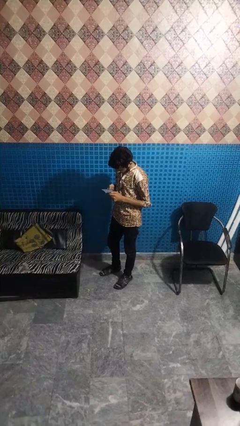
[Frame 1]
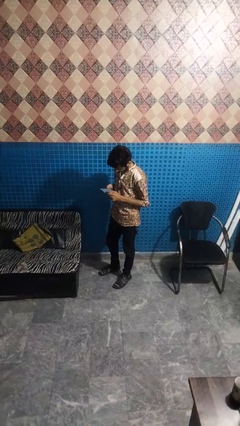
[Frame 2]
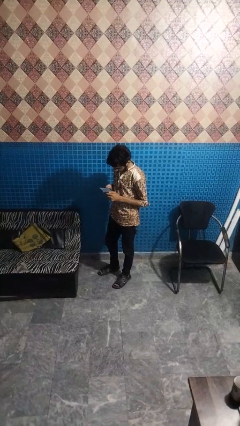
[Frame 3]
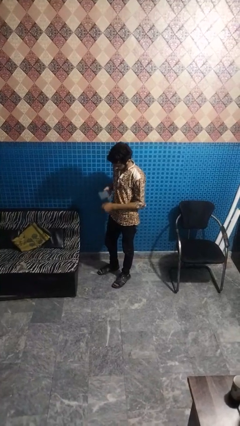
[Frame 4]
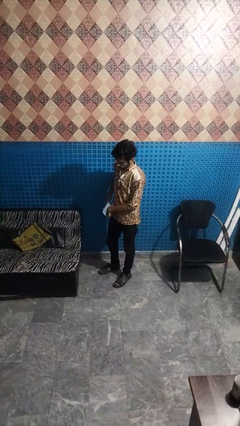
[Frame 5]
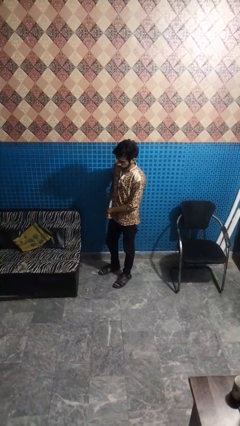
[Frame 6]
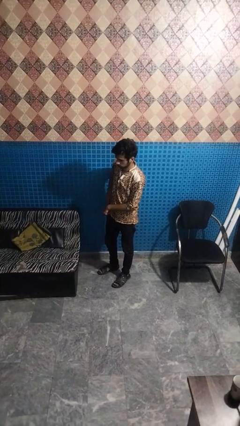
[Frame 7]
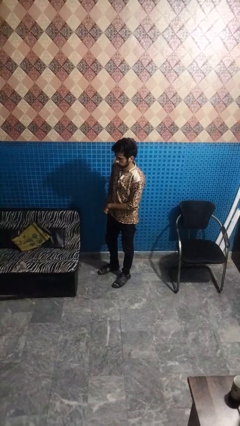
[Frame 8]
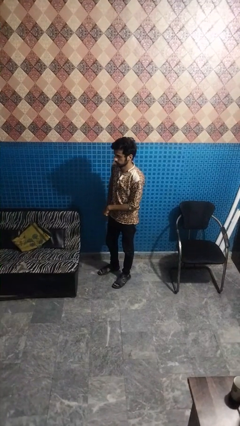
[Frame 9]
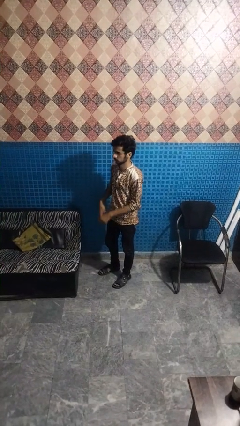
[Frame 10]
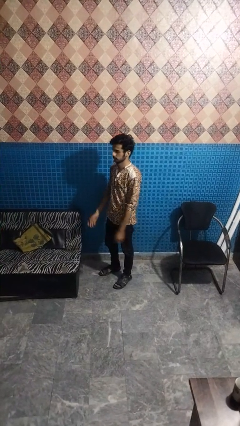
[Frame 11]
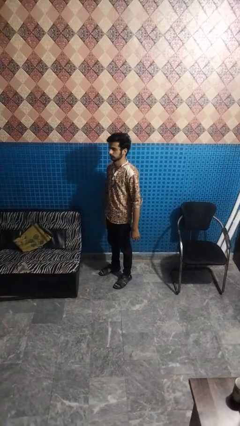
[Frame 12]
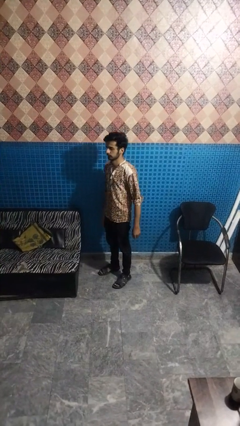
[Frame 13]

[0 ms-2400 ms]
person puts phone into pocket

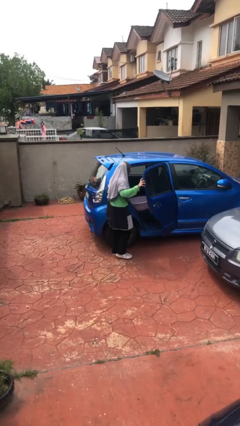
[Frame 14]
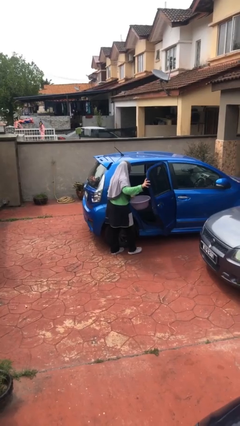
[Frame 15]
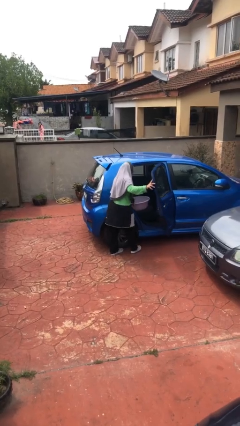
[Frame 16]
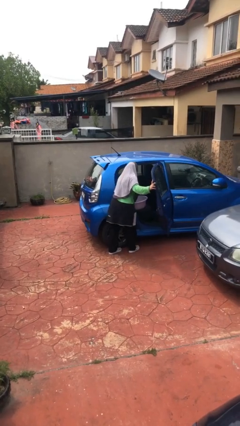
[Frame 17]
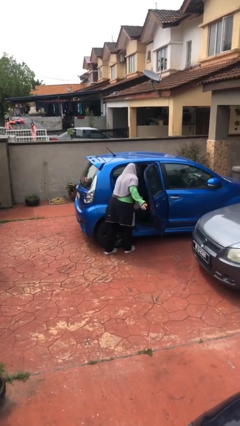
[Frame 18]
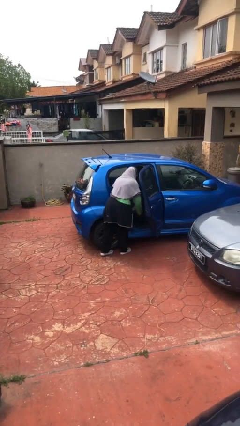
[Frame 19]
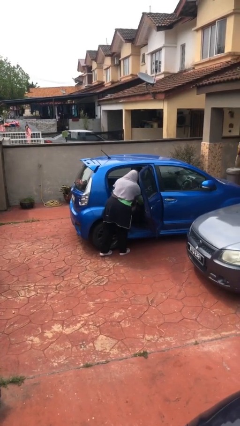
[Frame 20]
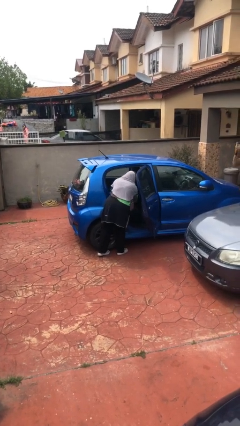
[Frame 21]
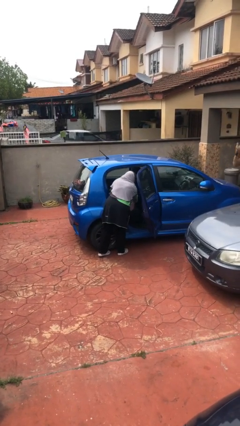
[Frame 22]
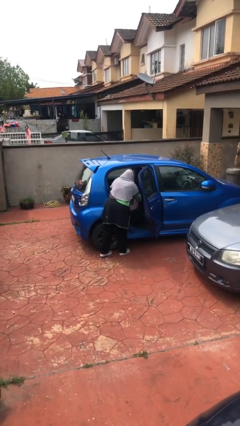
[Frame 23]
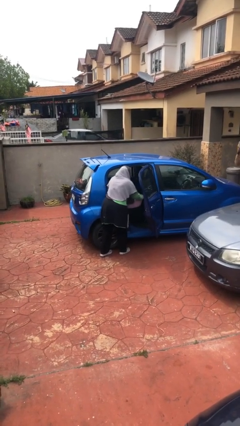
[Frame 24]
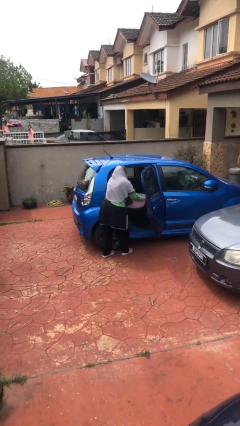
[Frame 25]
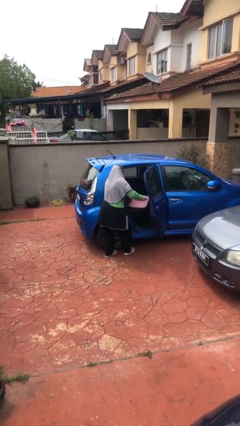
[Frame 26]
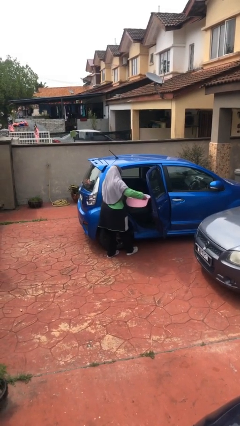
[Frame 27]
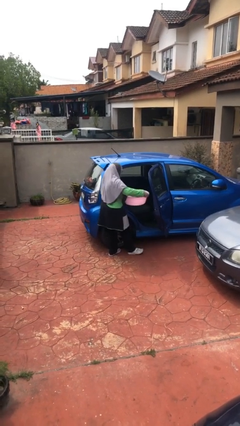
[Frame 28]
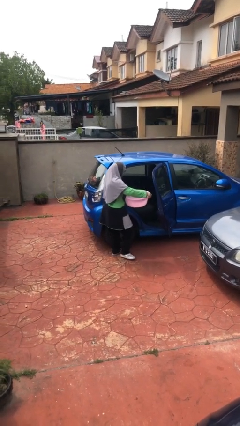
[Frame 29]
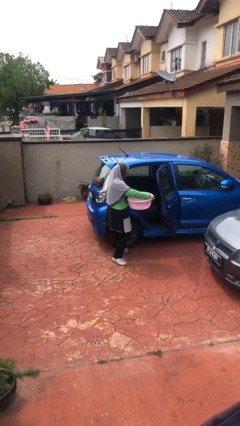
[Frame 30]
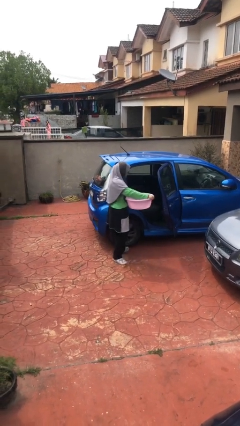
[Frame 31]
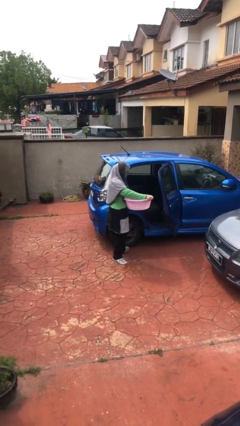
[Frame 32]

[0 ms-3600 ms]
person unloads car

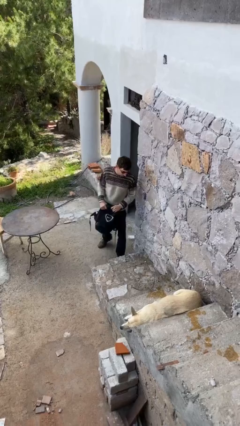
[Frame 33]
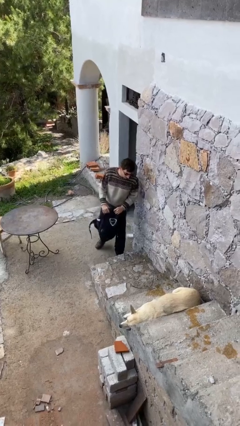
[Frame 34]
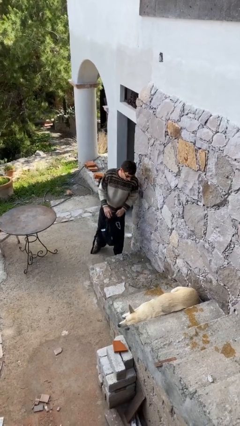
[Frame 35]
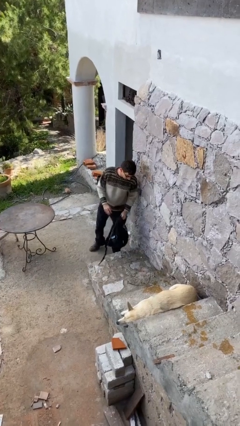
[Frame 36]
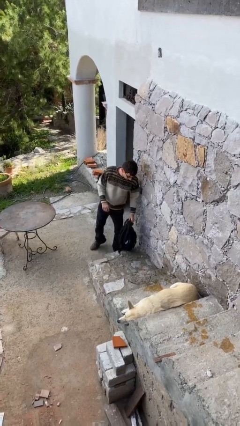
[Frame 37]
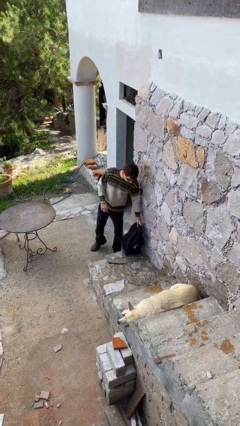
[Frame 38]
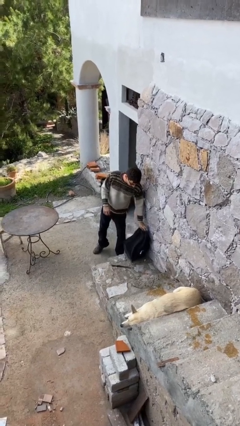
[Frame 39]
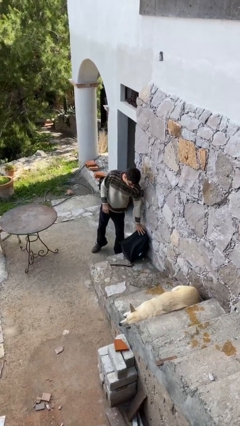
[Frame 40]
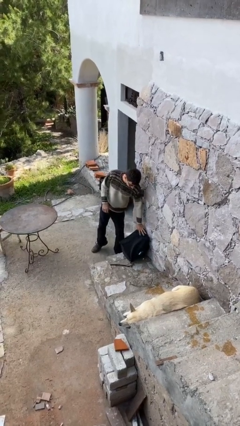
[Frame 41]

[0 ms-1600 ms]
person puts down object on floor

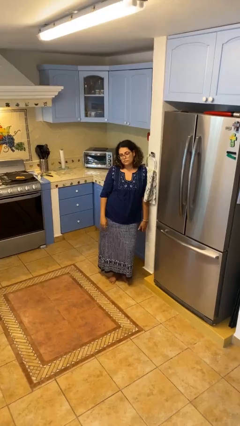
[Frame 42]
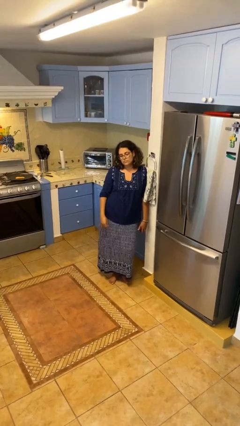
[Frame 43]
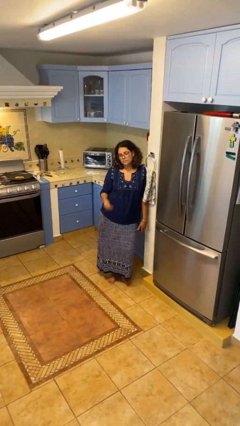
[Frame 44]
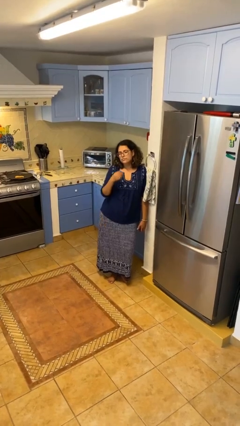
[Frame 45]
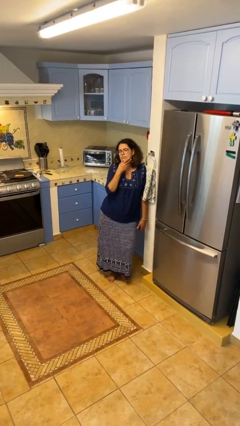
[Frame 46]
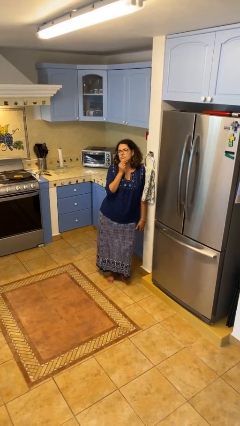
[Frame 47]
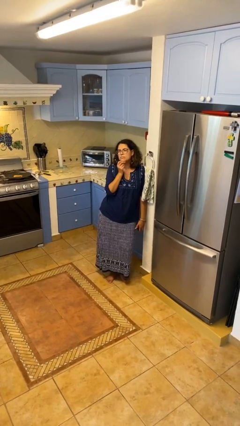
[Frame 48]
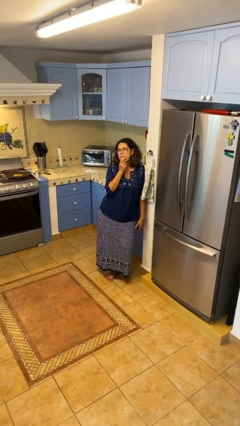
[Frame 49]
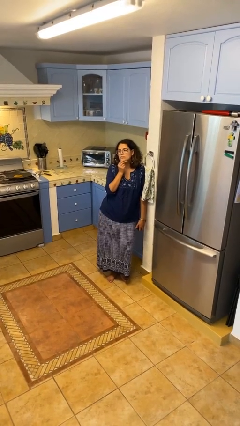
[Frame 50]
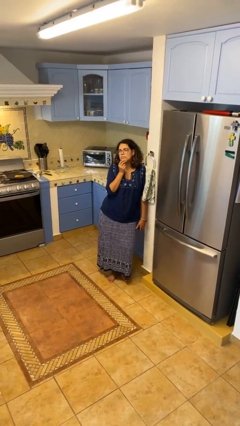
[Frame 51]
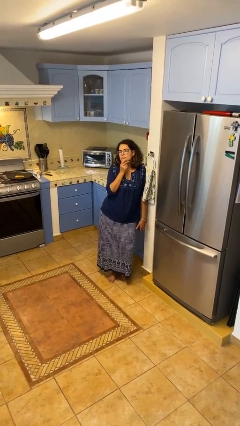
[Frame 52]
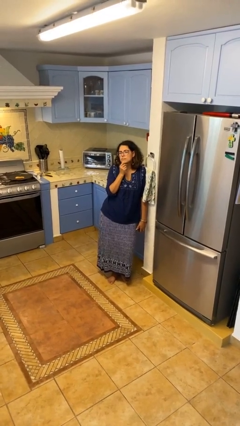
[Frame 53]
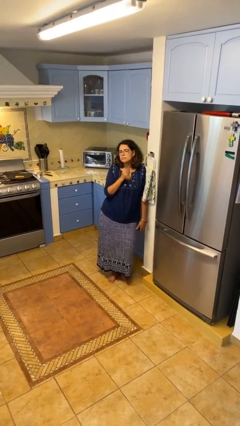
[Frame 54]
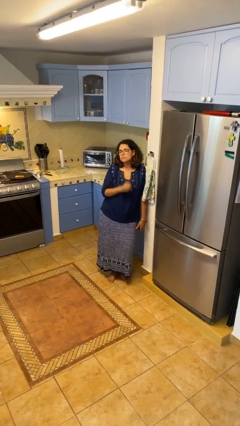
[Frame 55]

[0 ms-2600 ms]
person strokes chin

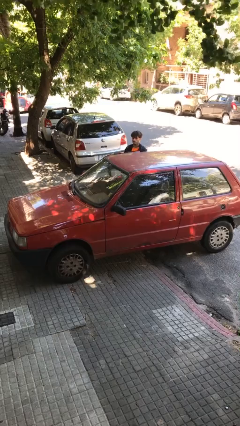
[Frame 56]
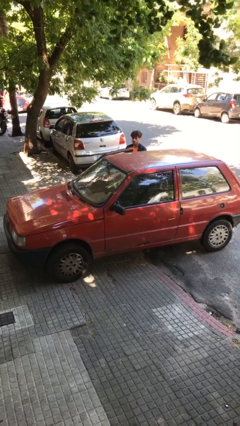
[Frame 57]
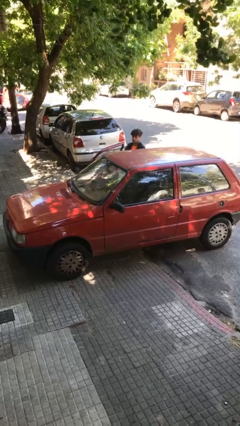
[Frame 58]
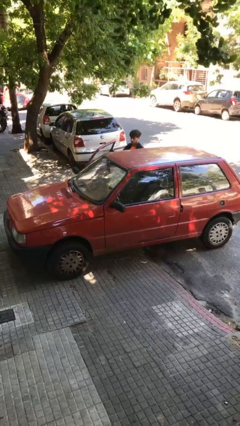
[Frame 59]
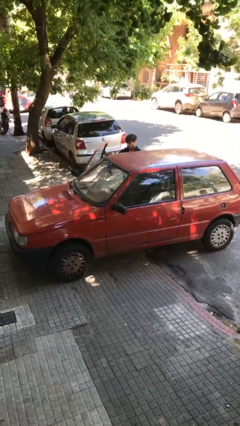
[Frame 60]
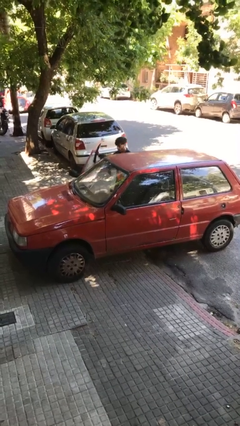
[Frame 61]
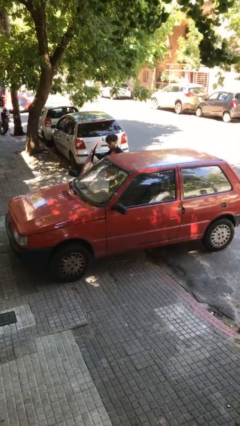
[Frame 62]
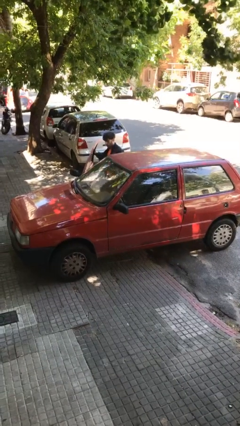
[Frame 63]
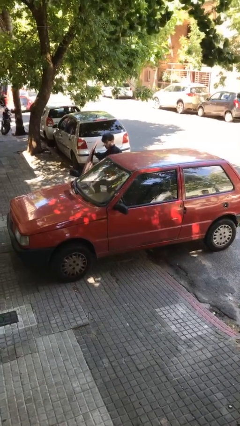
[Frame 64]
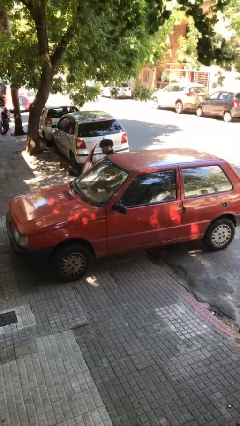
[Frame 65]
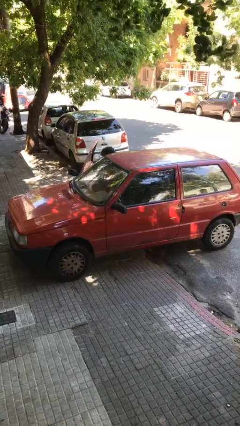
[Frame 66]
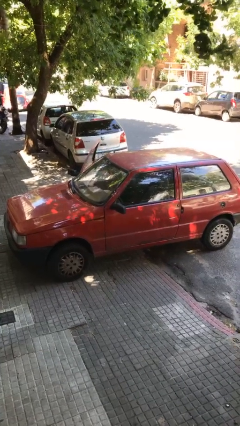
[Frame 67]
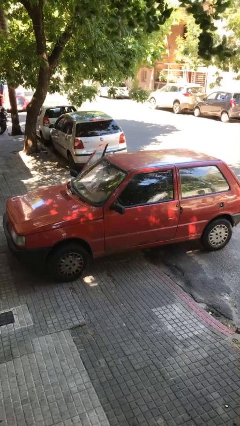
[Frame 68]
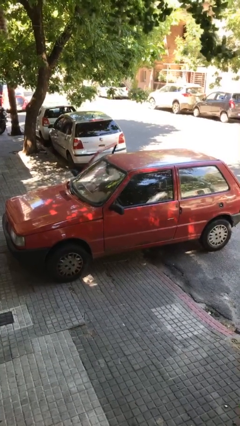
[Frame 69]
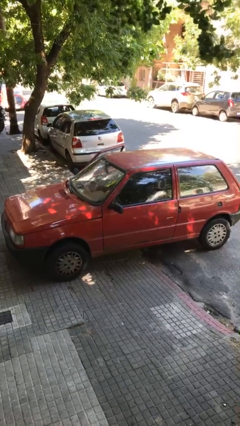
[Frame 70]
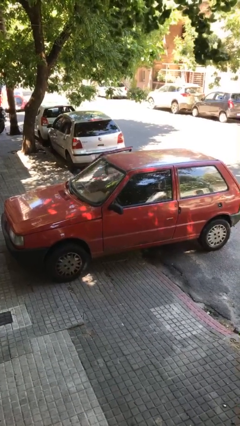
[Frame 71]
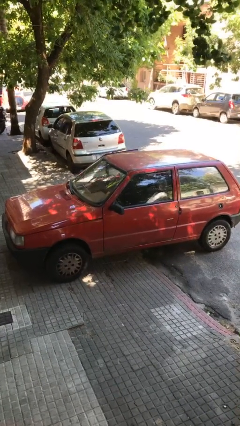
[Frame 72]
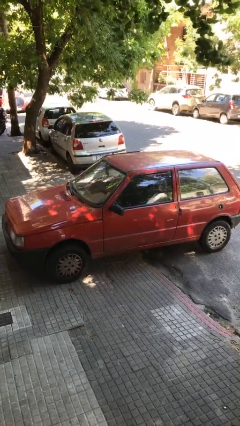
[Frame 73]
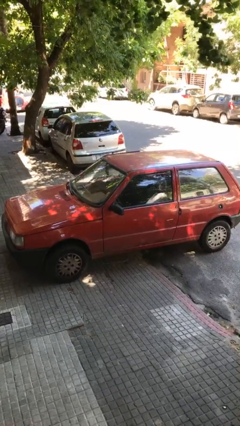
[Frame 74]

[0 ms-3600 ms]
car picks up person

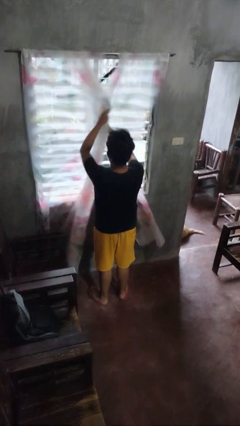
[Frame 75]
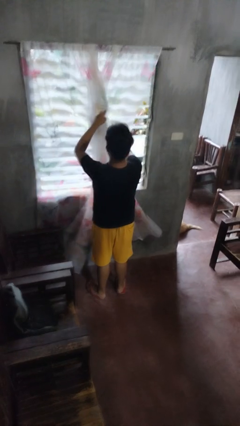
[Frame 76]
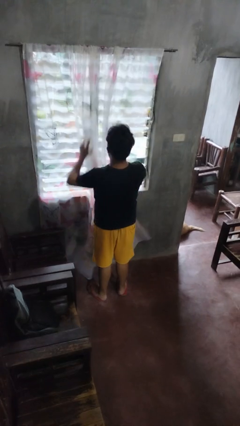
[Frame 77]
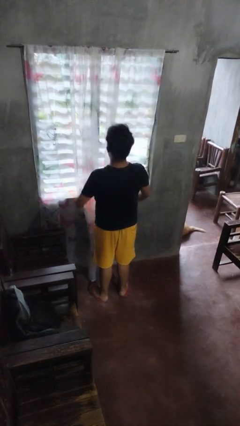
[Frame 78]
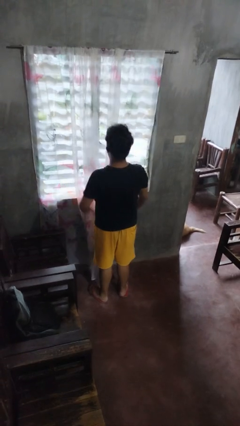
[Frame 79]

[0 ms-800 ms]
person closes curtains

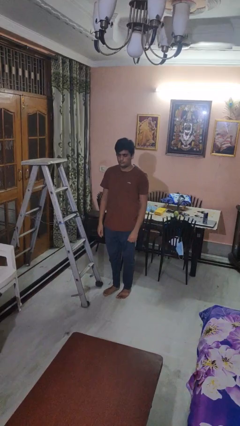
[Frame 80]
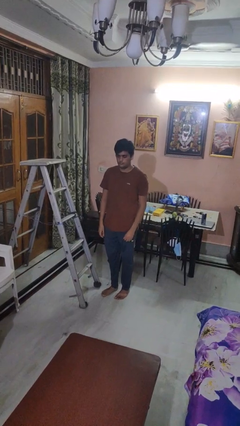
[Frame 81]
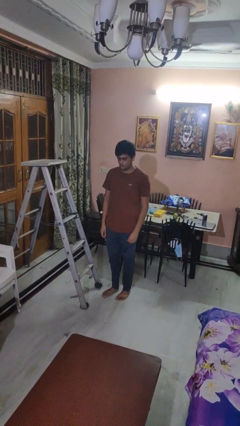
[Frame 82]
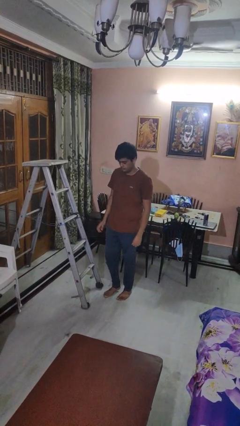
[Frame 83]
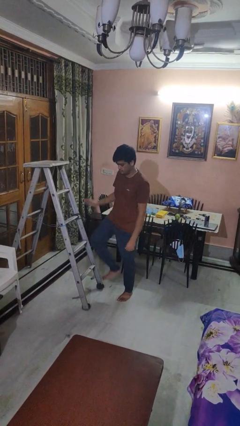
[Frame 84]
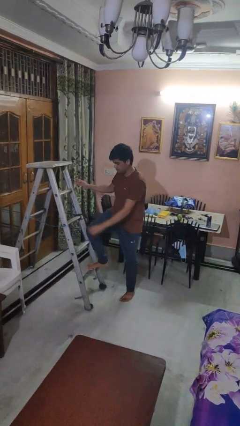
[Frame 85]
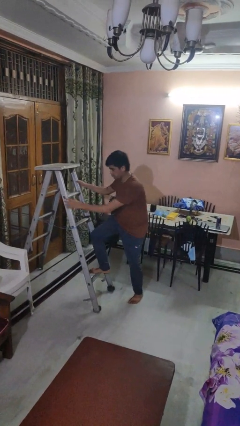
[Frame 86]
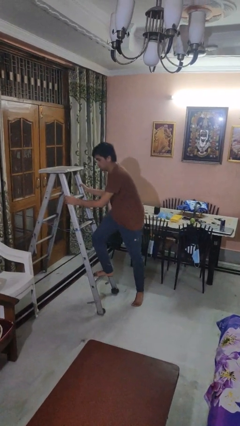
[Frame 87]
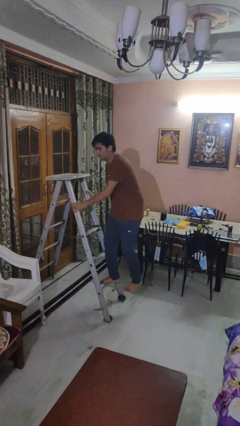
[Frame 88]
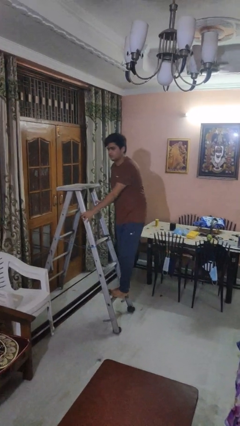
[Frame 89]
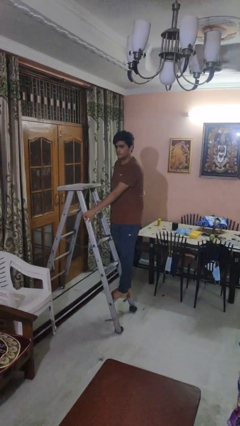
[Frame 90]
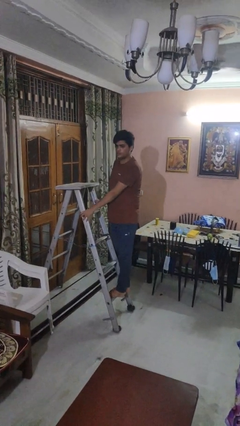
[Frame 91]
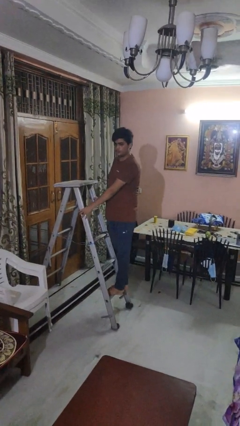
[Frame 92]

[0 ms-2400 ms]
person climbs up ladder

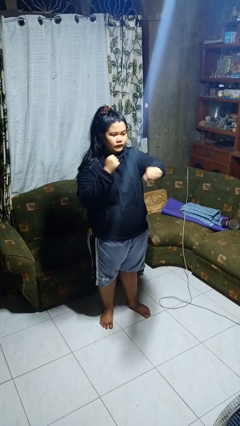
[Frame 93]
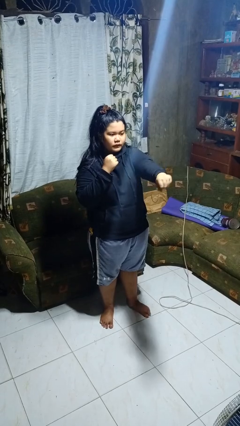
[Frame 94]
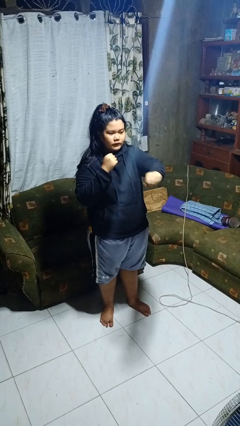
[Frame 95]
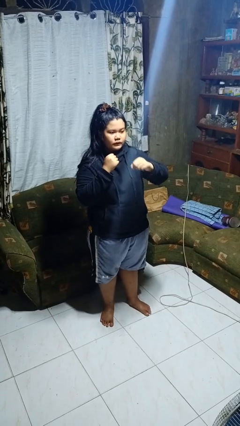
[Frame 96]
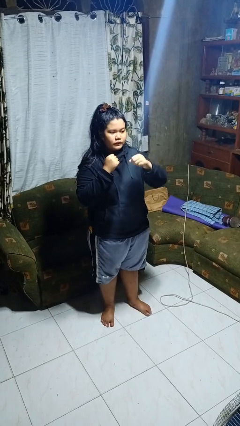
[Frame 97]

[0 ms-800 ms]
person punches
